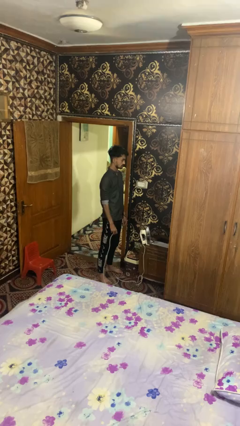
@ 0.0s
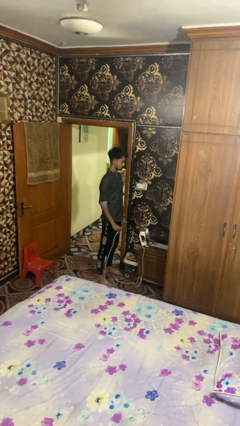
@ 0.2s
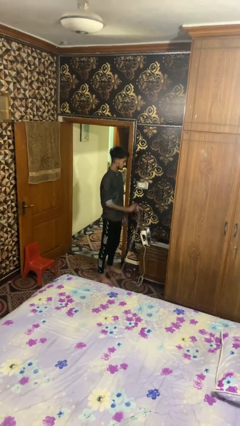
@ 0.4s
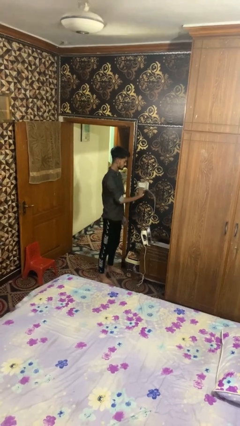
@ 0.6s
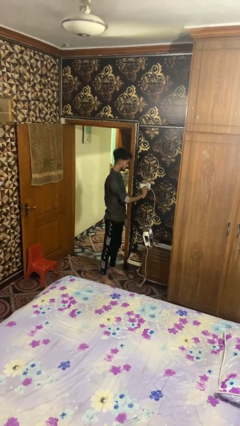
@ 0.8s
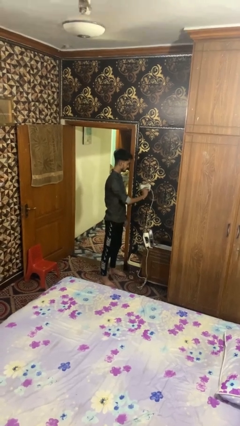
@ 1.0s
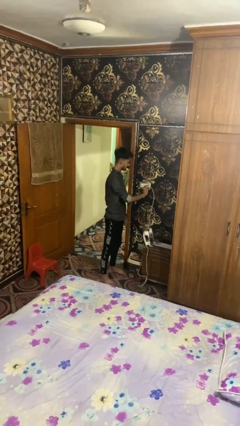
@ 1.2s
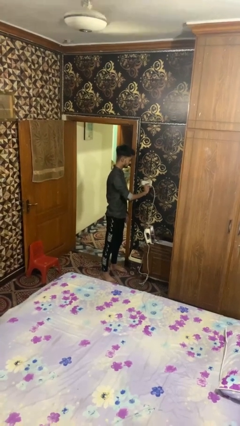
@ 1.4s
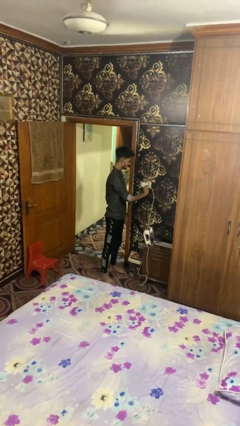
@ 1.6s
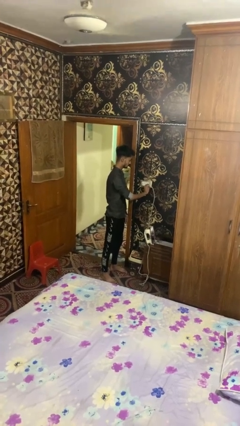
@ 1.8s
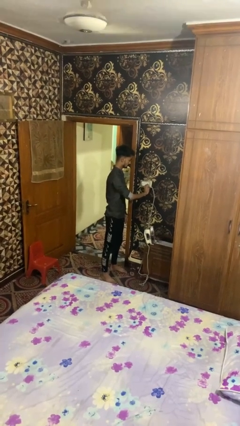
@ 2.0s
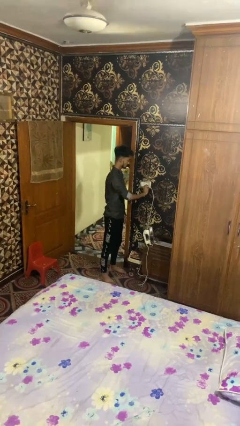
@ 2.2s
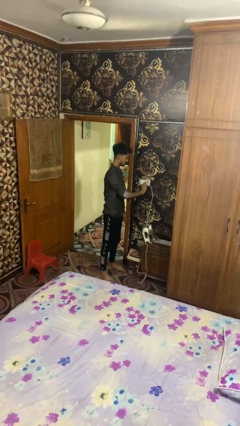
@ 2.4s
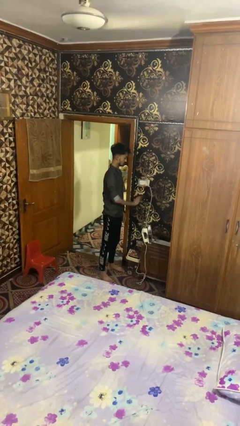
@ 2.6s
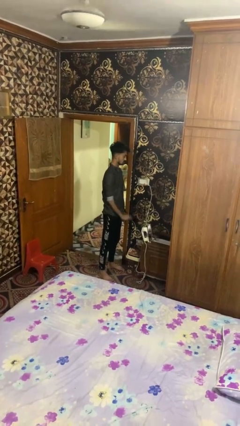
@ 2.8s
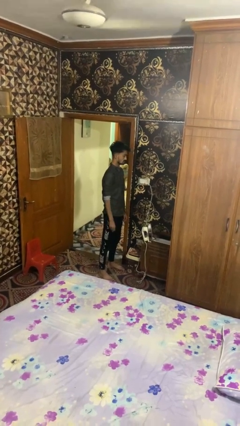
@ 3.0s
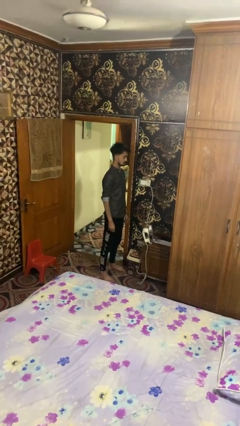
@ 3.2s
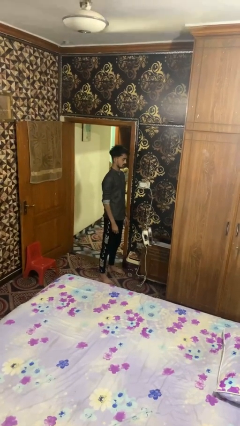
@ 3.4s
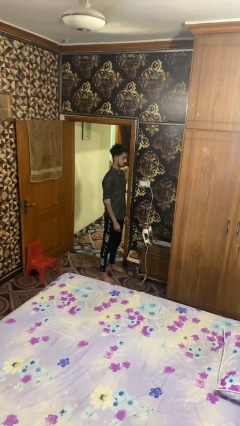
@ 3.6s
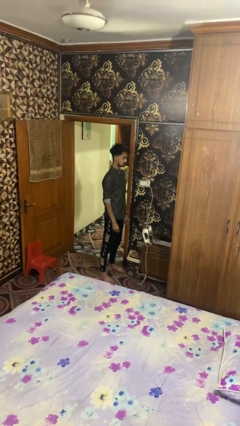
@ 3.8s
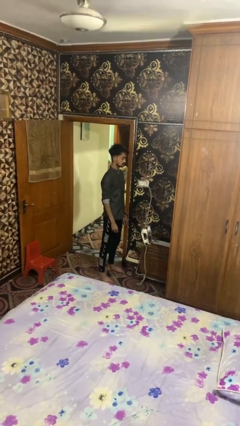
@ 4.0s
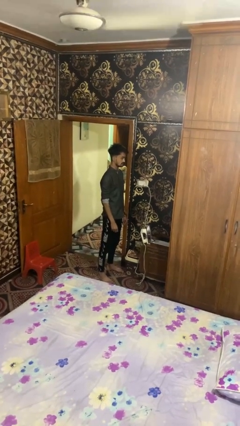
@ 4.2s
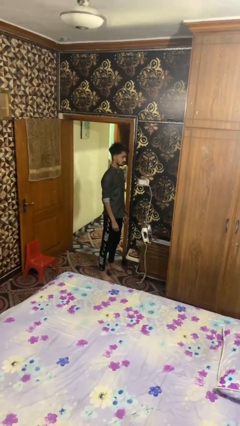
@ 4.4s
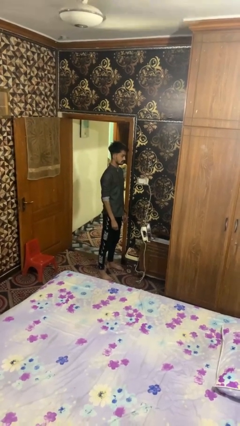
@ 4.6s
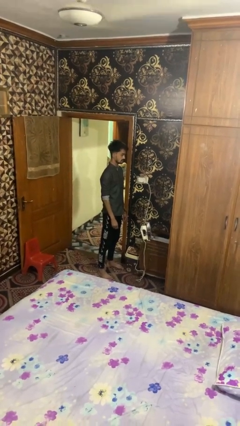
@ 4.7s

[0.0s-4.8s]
person plugs into electrical socket

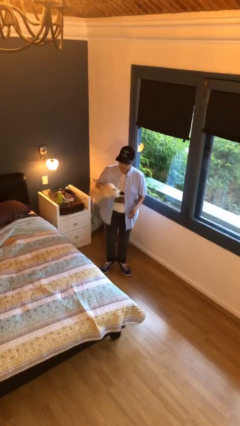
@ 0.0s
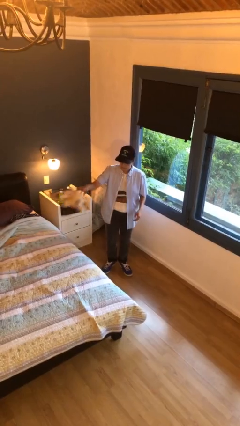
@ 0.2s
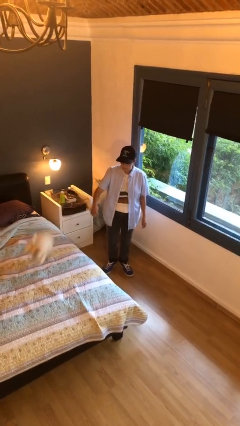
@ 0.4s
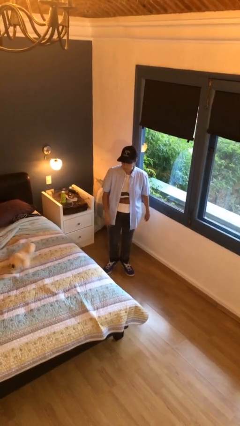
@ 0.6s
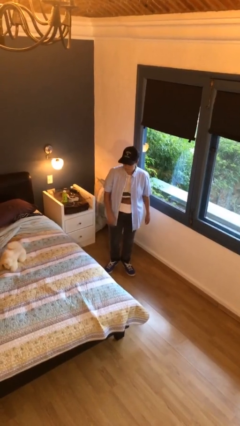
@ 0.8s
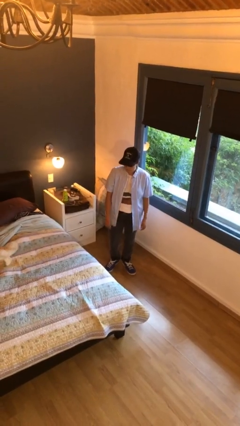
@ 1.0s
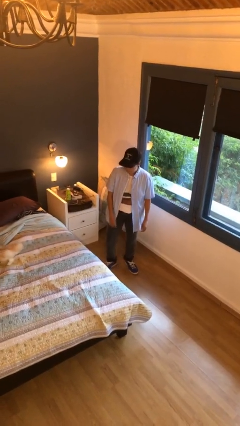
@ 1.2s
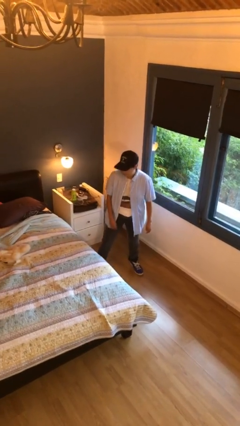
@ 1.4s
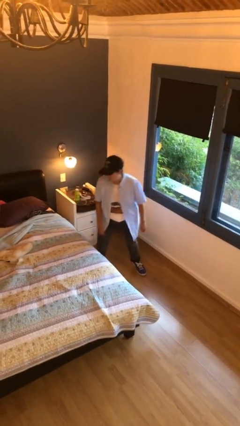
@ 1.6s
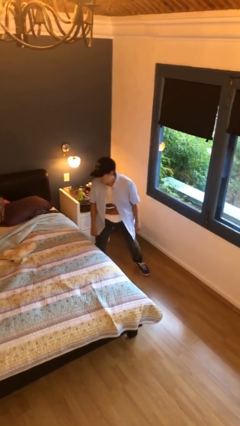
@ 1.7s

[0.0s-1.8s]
person throws object on bed

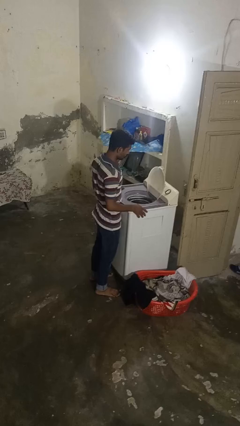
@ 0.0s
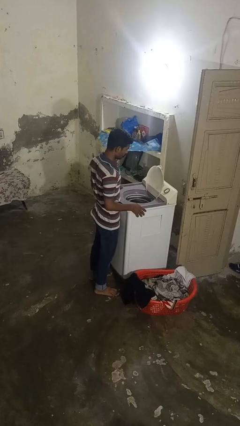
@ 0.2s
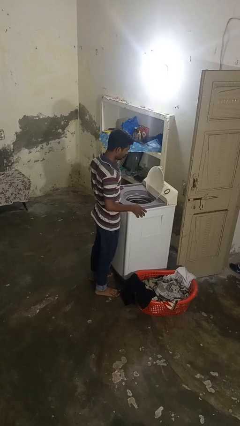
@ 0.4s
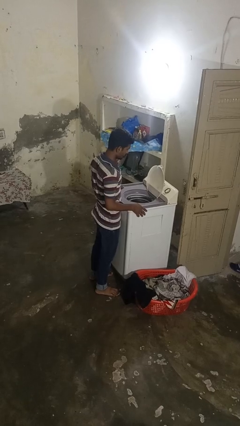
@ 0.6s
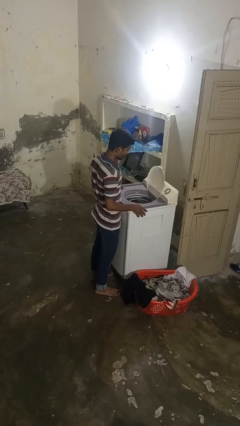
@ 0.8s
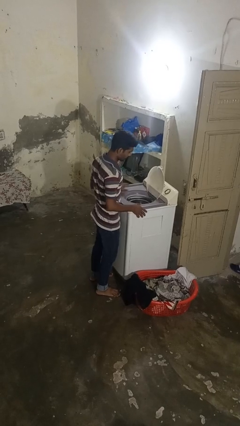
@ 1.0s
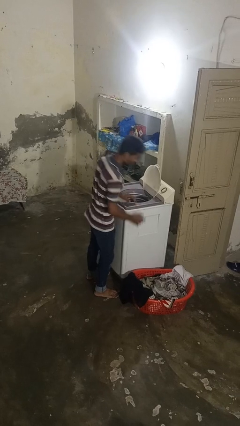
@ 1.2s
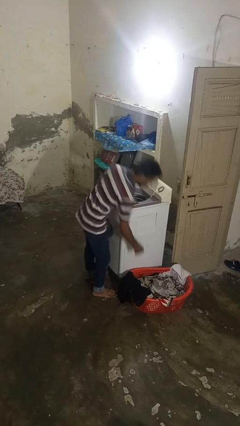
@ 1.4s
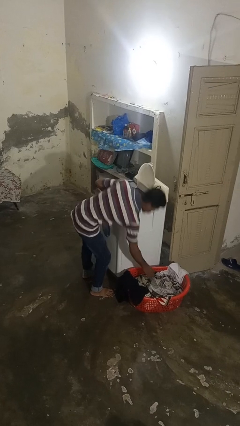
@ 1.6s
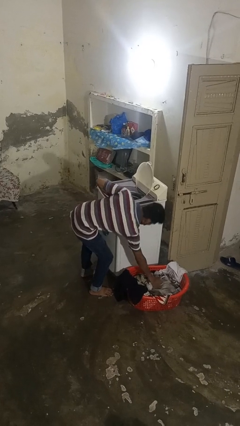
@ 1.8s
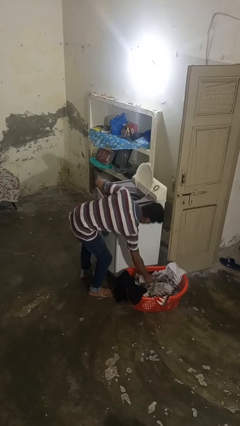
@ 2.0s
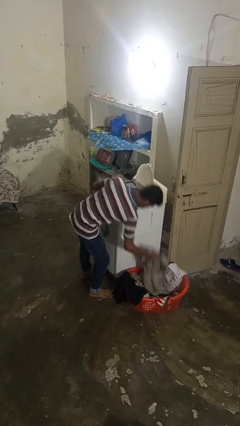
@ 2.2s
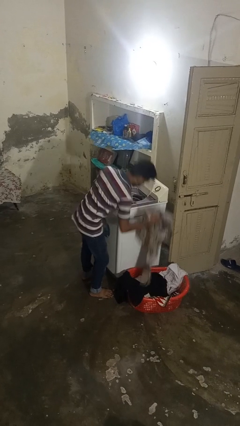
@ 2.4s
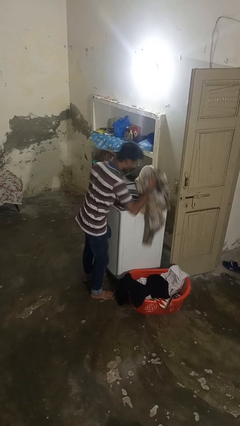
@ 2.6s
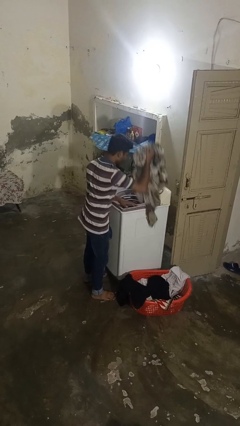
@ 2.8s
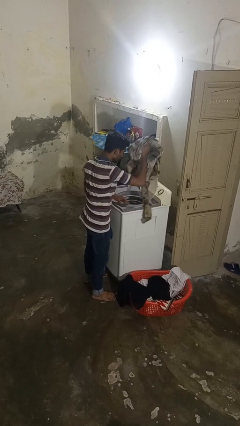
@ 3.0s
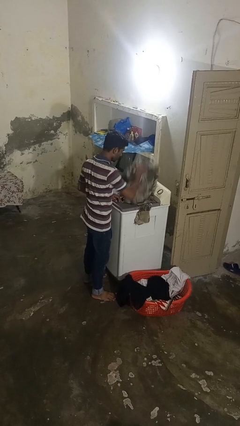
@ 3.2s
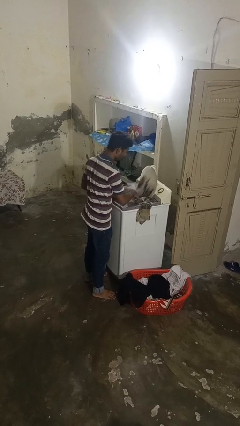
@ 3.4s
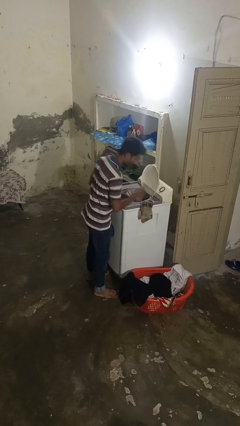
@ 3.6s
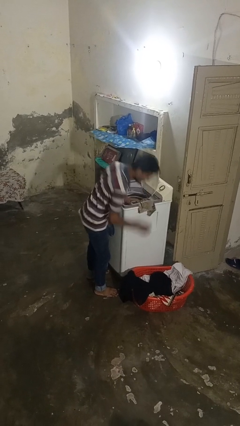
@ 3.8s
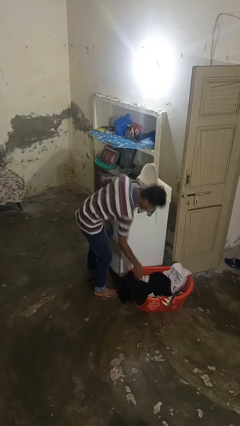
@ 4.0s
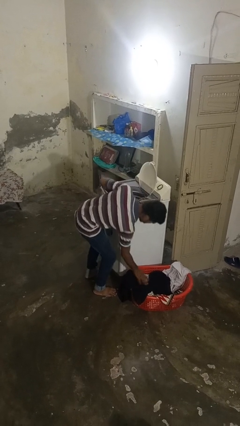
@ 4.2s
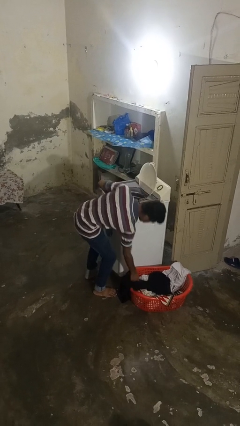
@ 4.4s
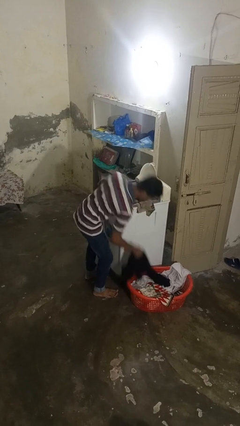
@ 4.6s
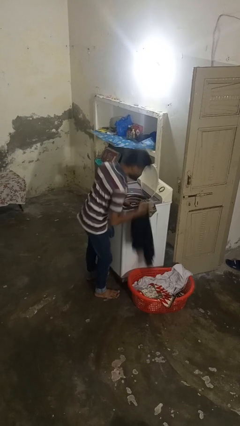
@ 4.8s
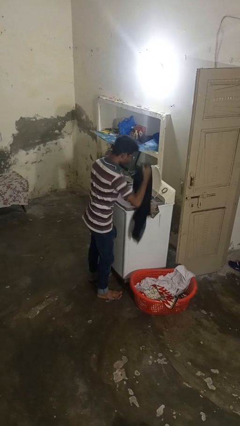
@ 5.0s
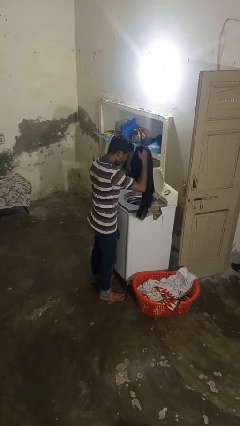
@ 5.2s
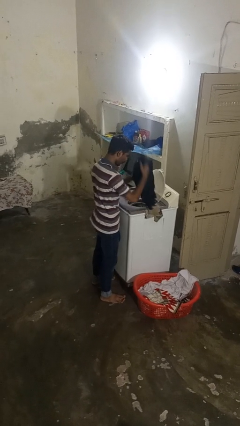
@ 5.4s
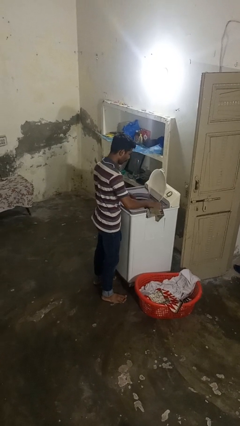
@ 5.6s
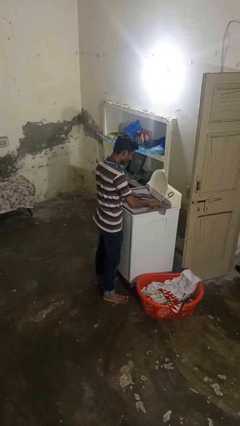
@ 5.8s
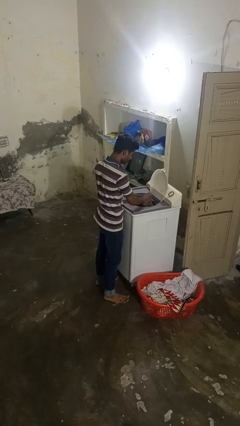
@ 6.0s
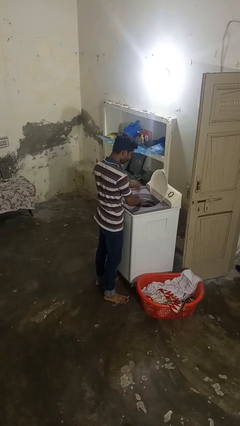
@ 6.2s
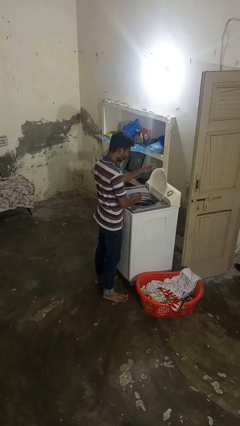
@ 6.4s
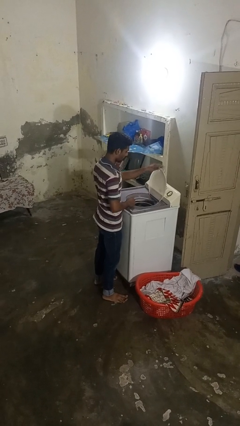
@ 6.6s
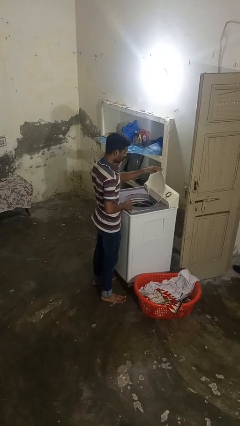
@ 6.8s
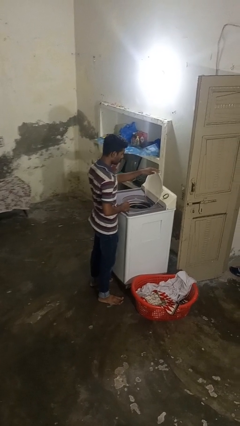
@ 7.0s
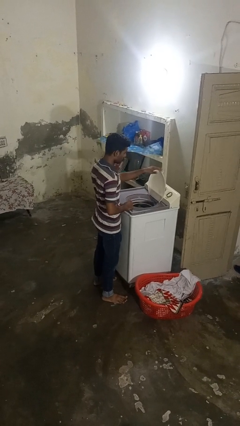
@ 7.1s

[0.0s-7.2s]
person loads dryer

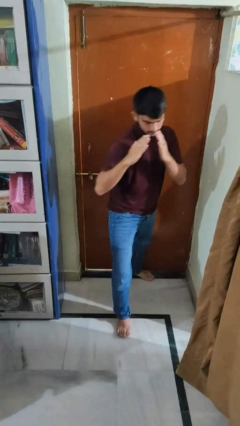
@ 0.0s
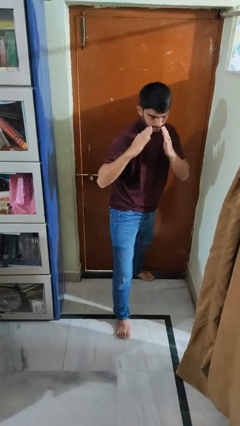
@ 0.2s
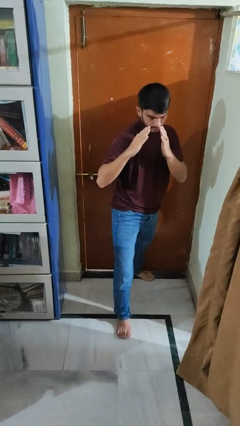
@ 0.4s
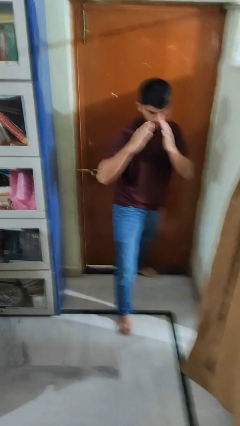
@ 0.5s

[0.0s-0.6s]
person karate chop

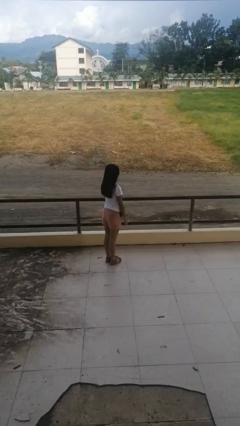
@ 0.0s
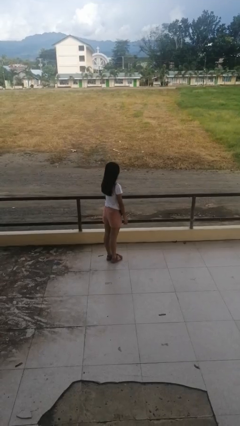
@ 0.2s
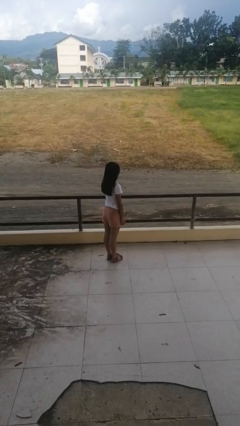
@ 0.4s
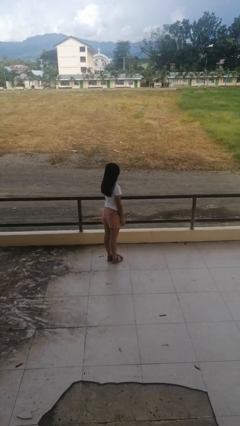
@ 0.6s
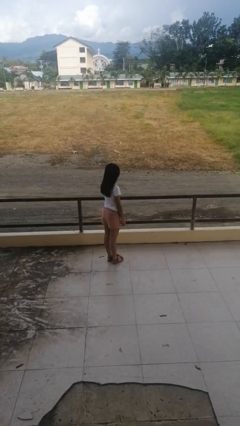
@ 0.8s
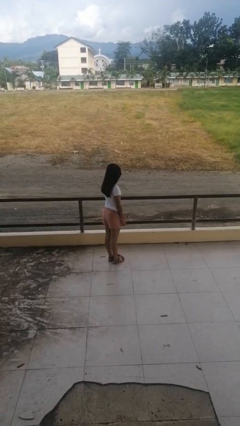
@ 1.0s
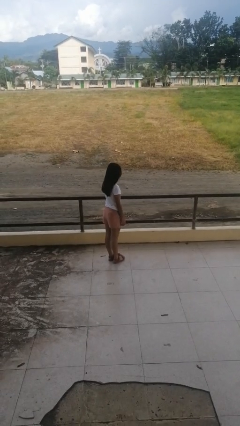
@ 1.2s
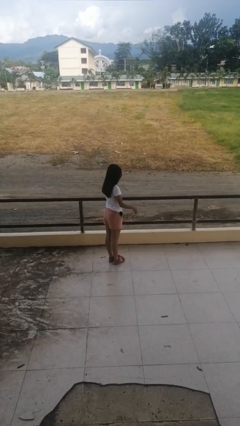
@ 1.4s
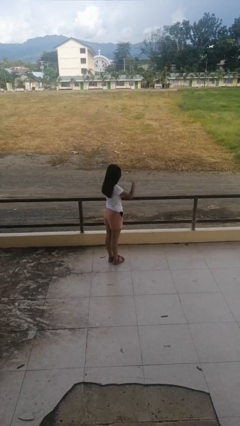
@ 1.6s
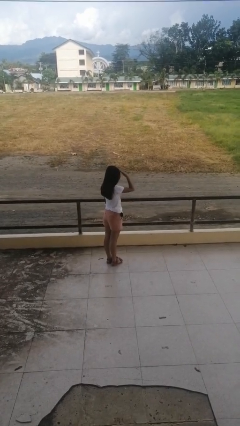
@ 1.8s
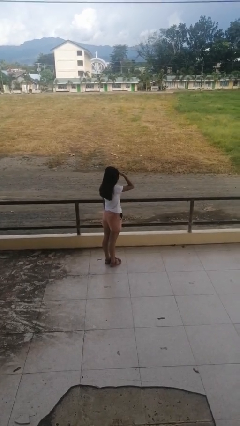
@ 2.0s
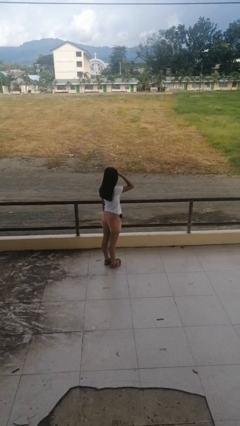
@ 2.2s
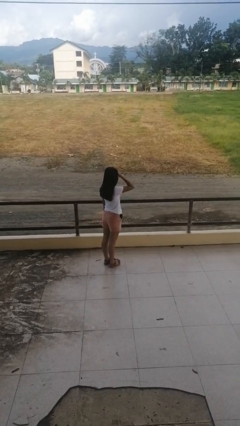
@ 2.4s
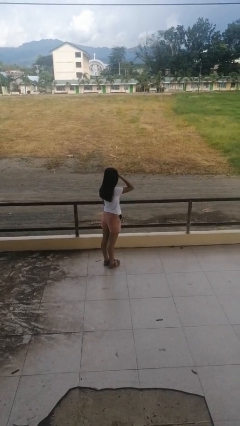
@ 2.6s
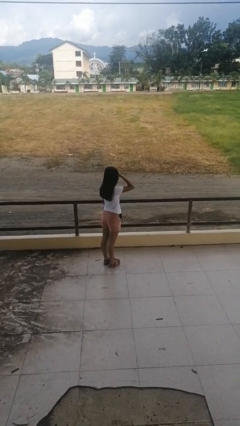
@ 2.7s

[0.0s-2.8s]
person shades eyes

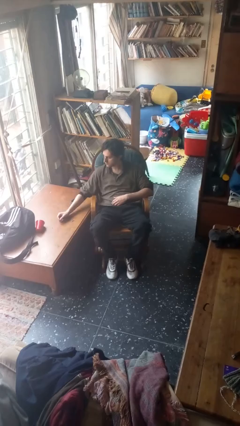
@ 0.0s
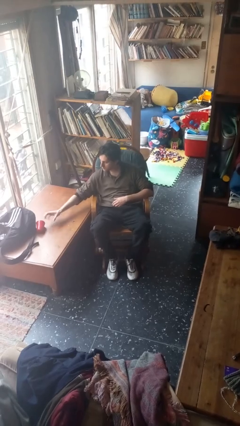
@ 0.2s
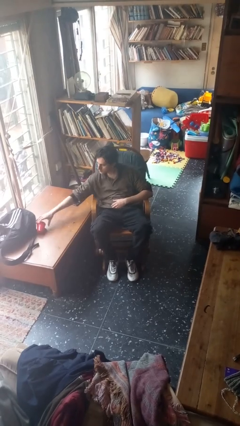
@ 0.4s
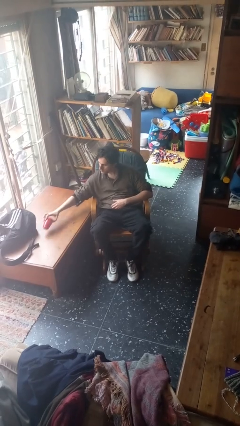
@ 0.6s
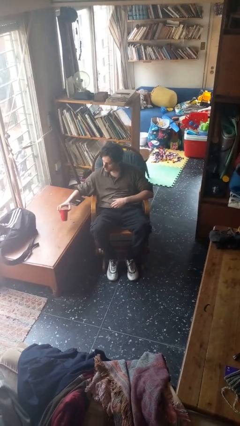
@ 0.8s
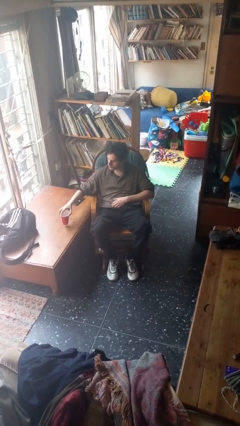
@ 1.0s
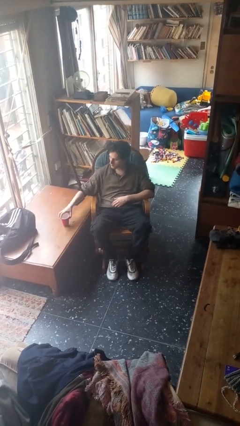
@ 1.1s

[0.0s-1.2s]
person sets upright glass
